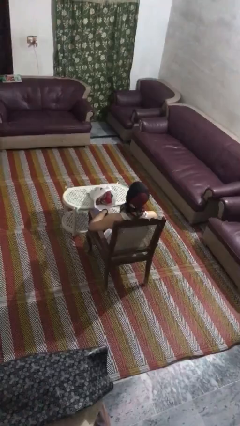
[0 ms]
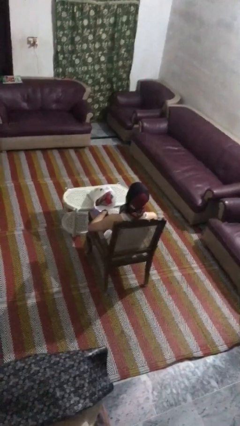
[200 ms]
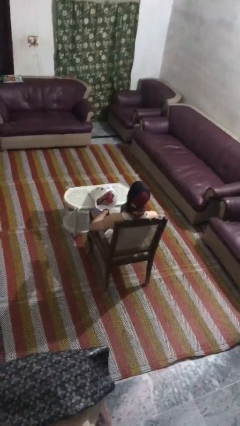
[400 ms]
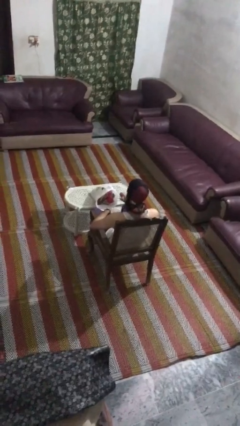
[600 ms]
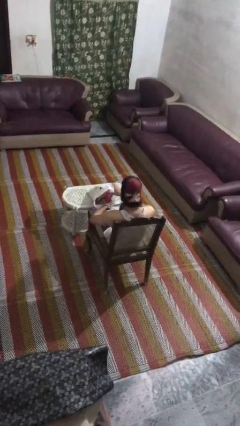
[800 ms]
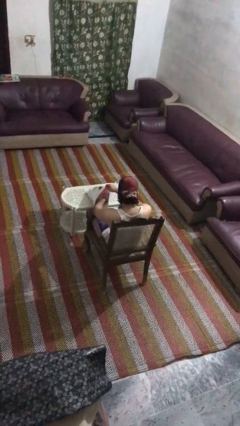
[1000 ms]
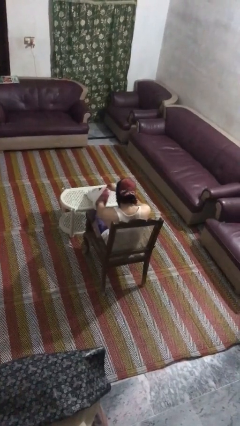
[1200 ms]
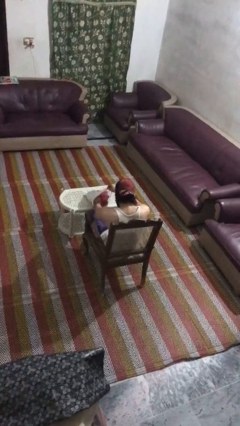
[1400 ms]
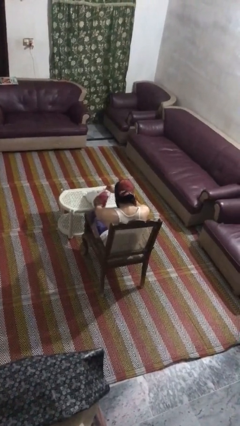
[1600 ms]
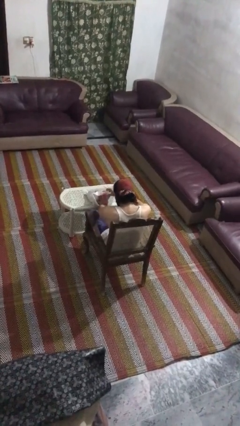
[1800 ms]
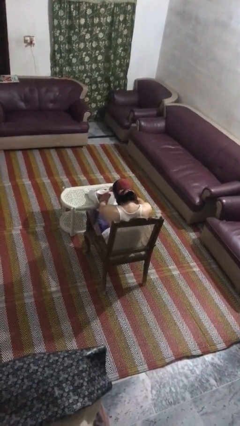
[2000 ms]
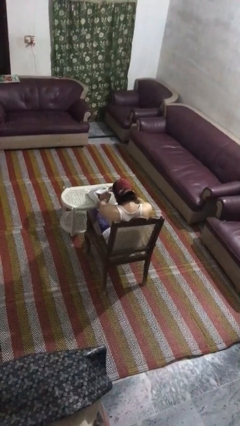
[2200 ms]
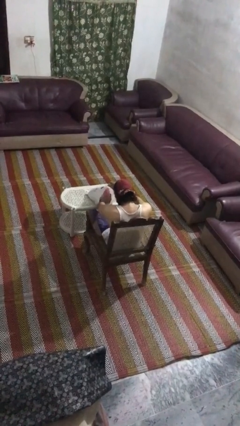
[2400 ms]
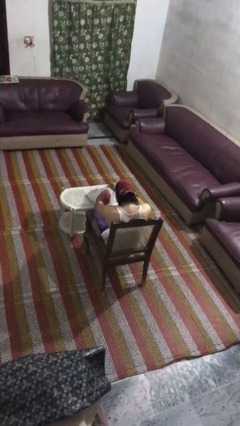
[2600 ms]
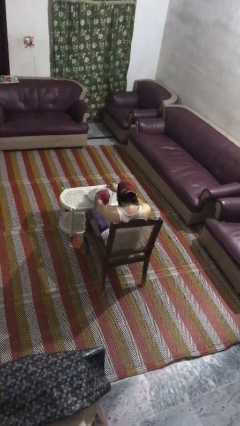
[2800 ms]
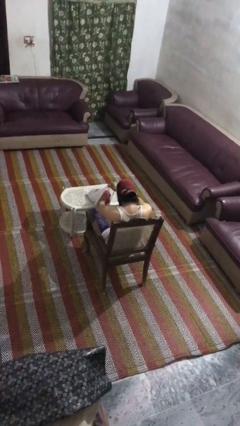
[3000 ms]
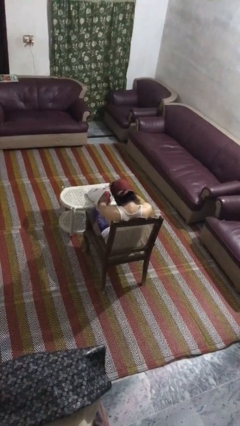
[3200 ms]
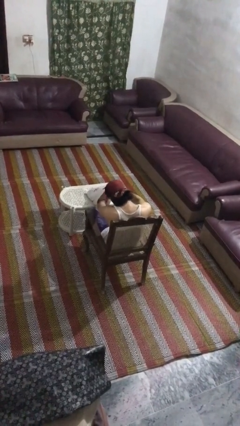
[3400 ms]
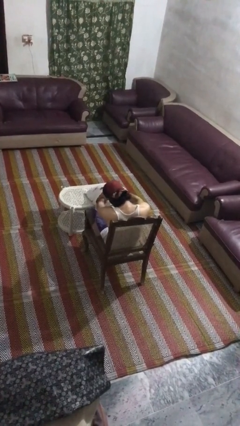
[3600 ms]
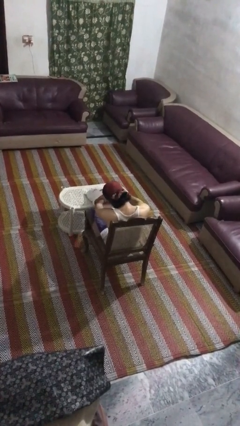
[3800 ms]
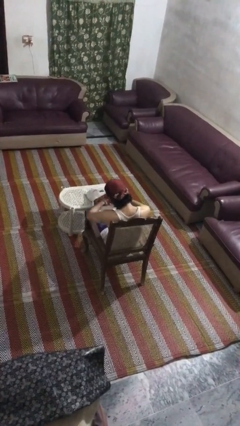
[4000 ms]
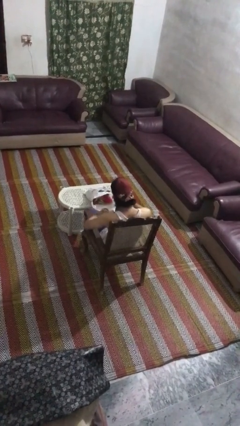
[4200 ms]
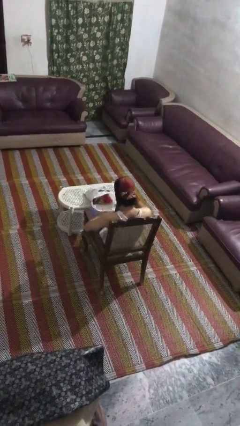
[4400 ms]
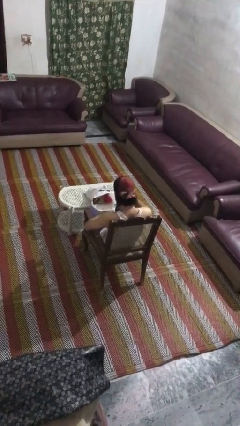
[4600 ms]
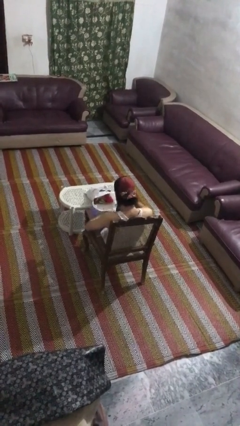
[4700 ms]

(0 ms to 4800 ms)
person searches in bag

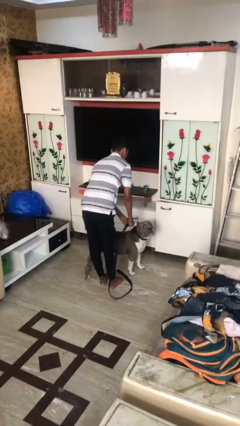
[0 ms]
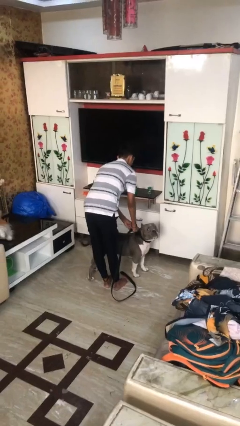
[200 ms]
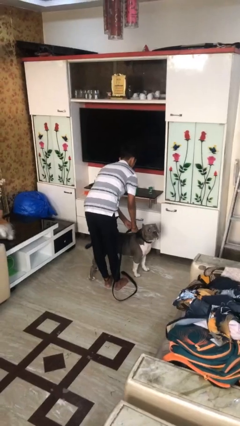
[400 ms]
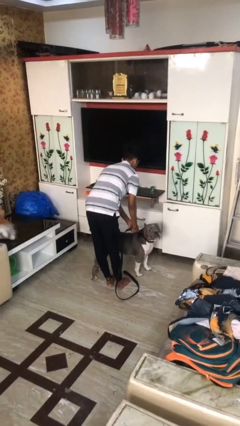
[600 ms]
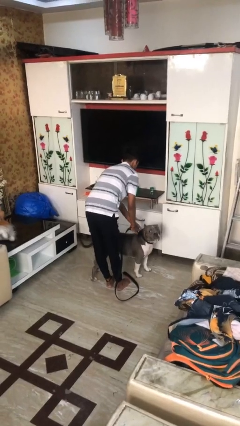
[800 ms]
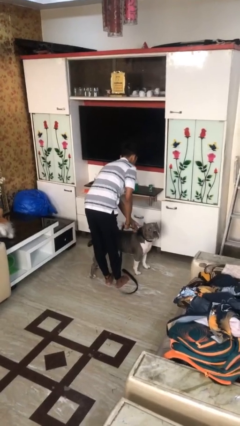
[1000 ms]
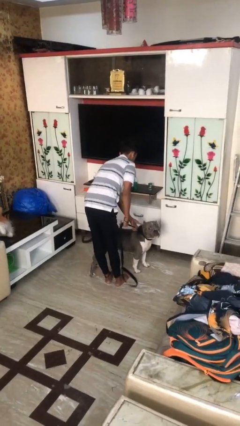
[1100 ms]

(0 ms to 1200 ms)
person attaches leash to dog

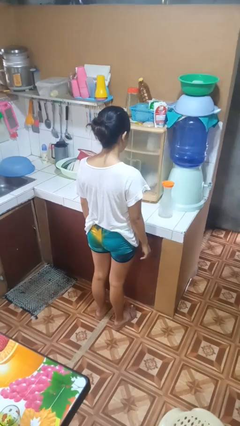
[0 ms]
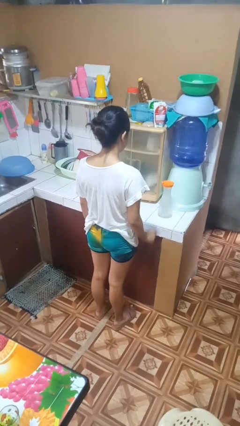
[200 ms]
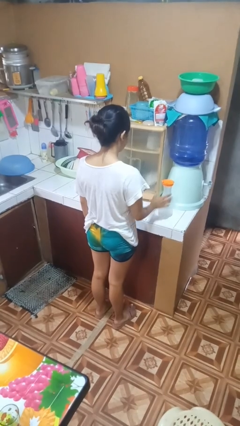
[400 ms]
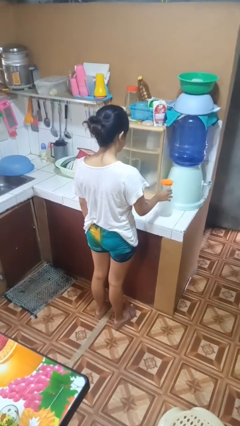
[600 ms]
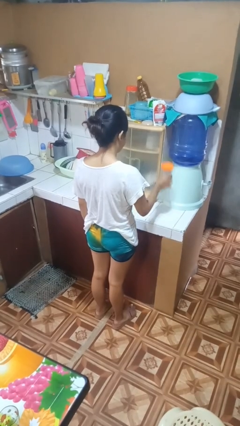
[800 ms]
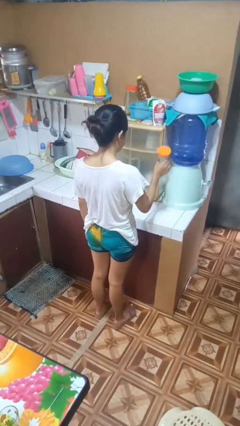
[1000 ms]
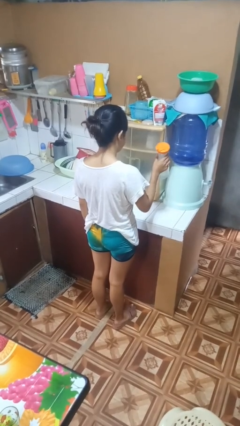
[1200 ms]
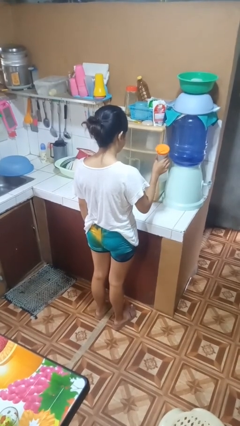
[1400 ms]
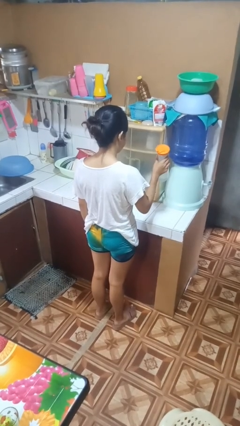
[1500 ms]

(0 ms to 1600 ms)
person picks up object from countertop

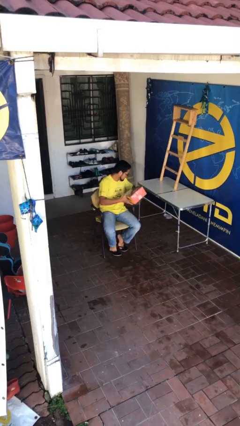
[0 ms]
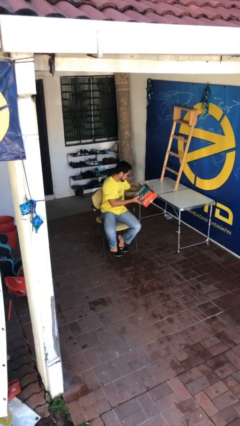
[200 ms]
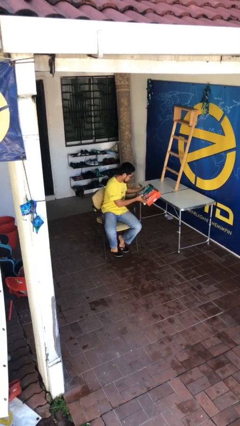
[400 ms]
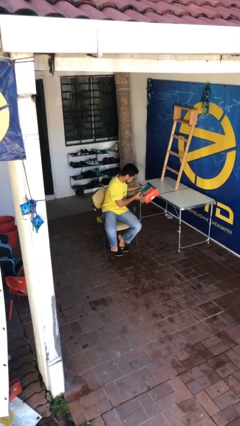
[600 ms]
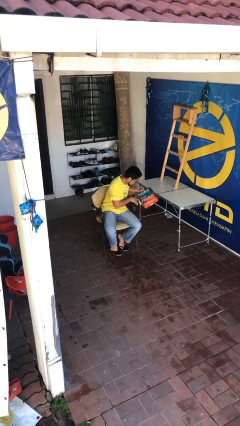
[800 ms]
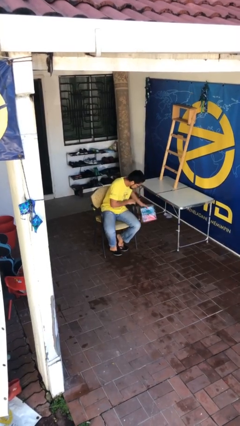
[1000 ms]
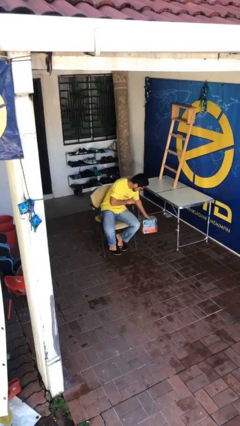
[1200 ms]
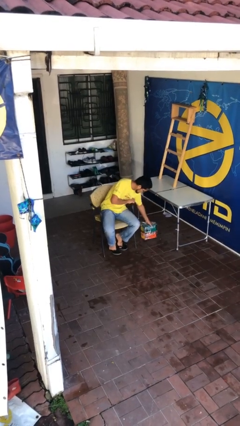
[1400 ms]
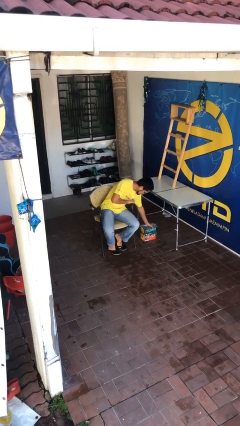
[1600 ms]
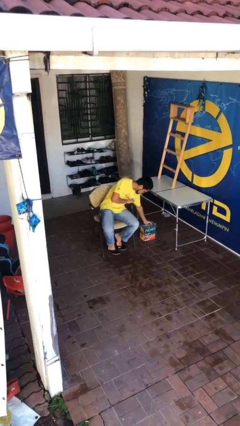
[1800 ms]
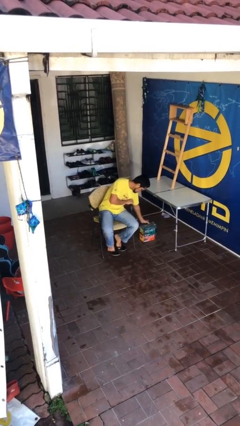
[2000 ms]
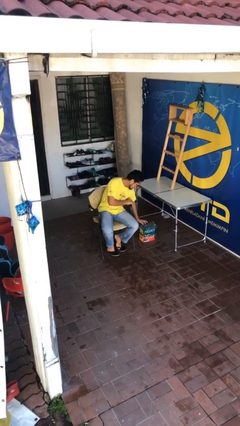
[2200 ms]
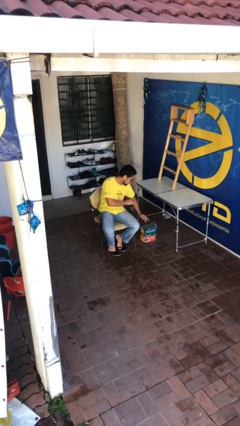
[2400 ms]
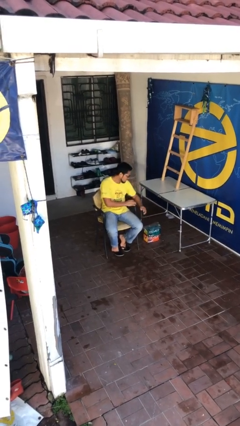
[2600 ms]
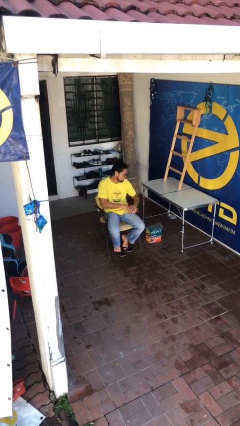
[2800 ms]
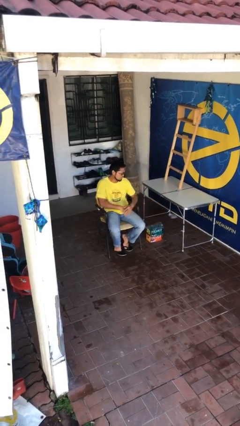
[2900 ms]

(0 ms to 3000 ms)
person puts down object on floor

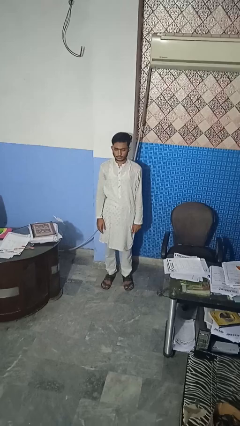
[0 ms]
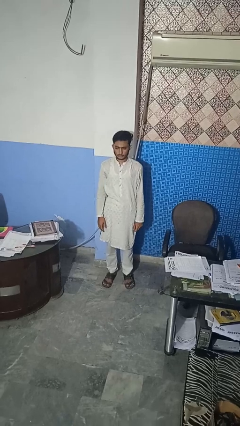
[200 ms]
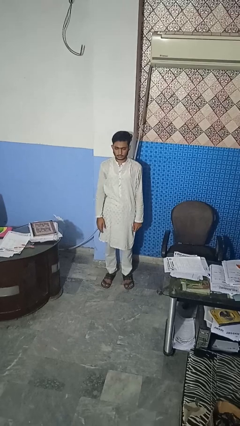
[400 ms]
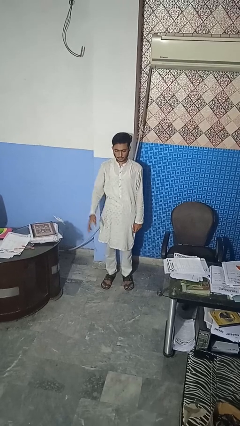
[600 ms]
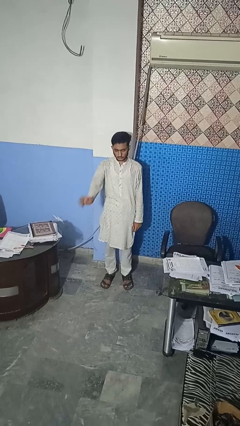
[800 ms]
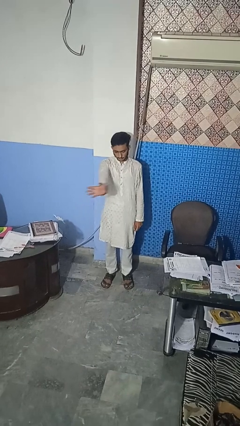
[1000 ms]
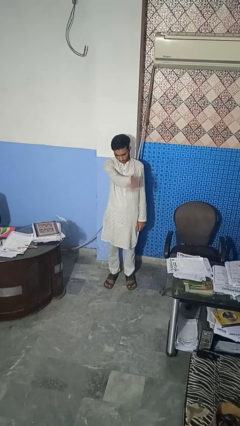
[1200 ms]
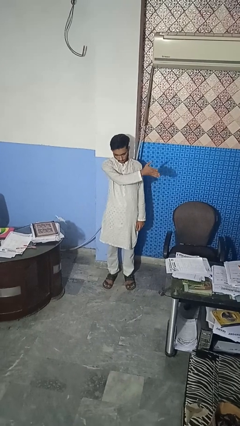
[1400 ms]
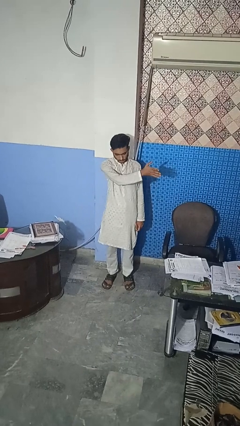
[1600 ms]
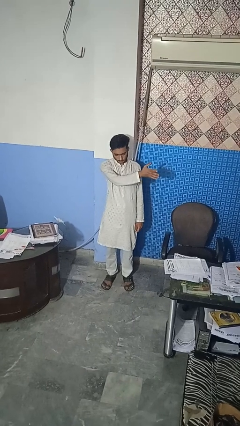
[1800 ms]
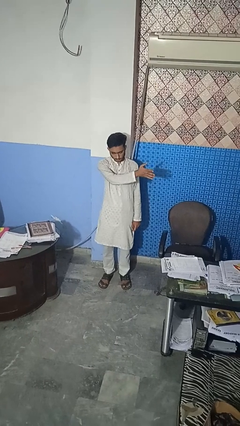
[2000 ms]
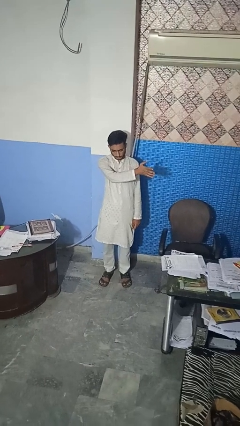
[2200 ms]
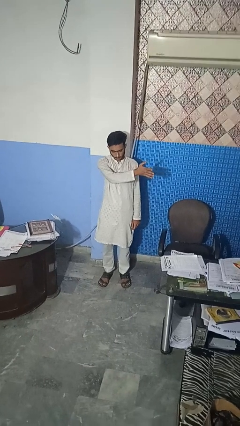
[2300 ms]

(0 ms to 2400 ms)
person gestures swipe left

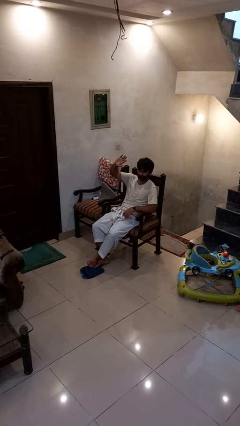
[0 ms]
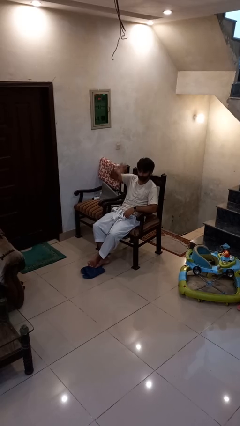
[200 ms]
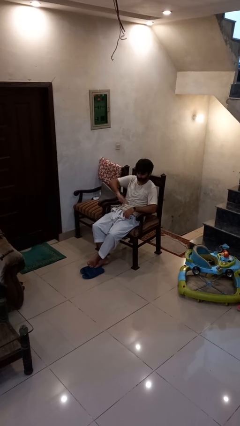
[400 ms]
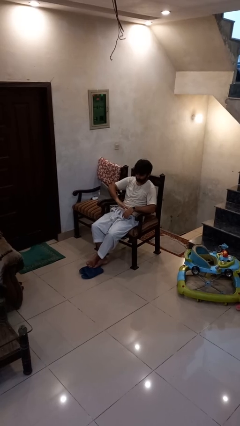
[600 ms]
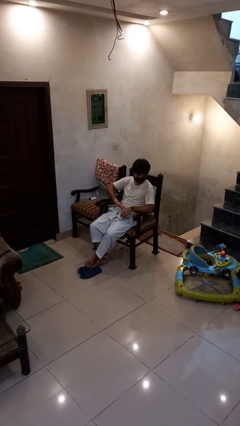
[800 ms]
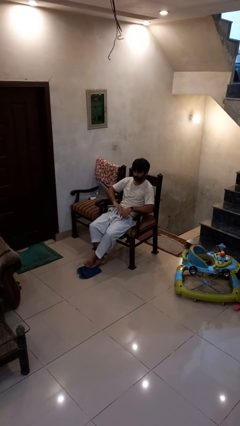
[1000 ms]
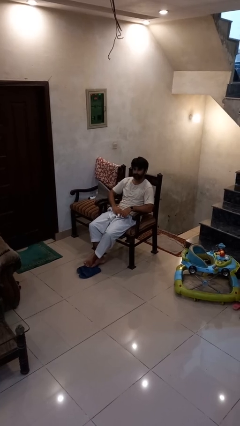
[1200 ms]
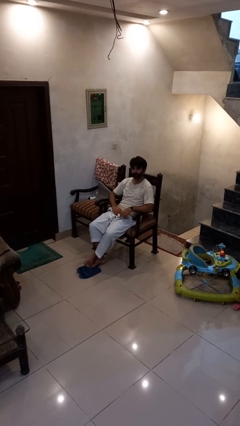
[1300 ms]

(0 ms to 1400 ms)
person gestures swipe down

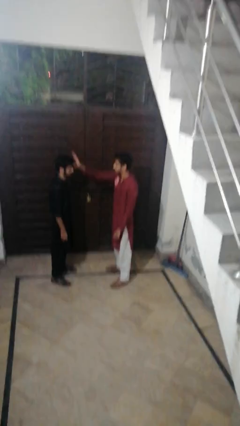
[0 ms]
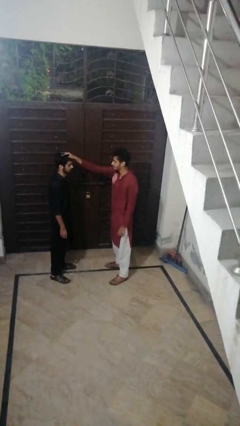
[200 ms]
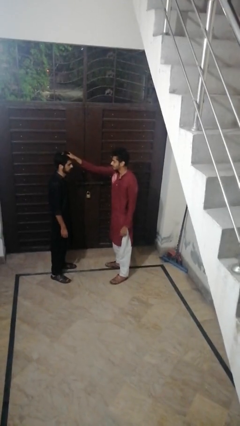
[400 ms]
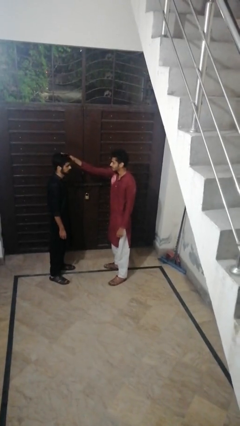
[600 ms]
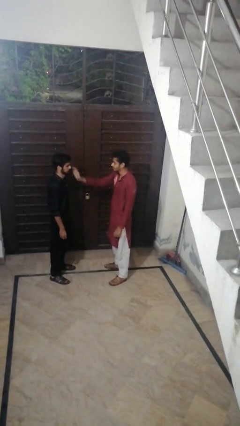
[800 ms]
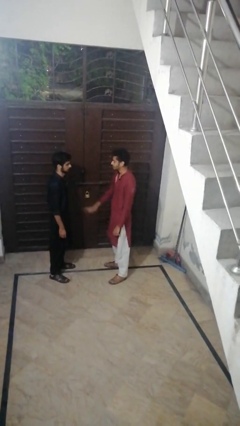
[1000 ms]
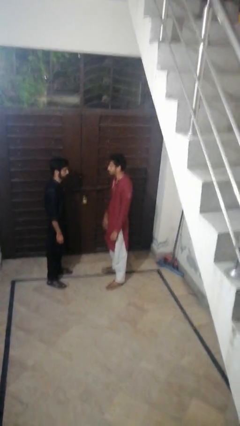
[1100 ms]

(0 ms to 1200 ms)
person grabs person by hair

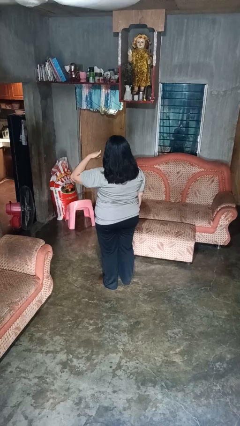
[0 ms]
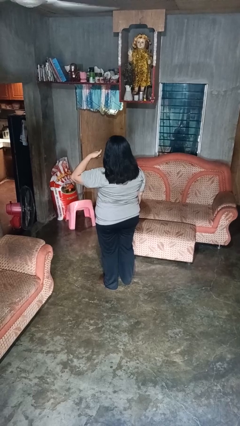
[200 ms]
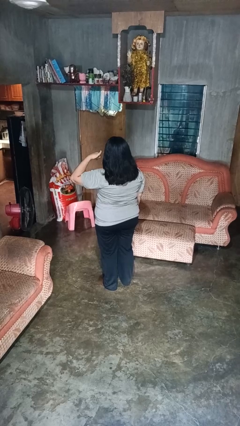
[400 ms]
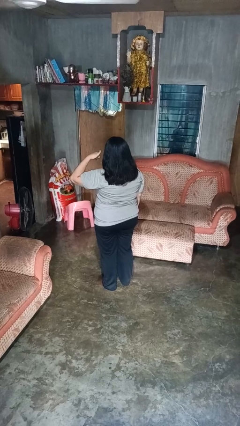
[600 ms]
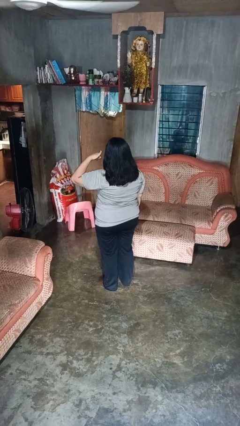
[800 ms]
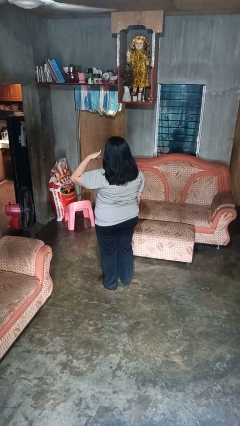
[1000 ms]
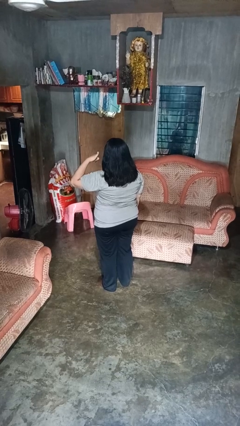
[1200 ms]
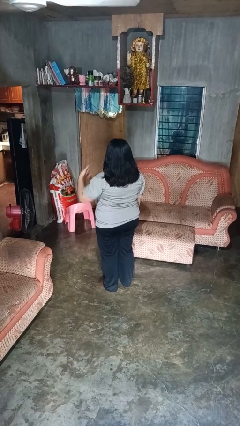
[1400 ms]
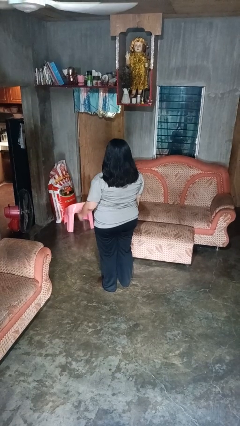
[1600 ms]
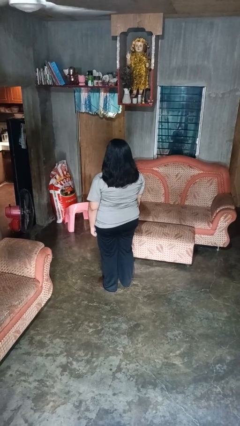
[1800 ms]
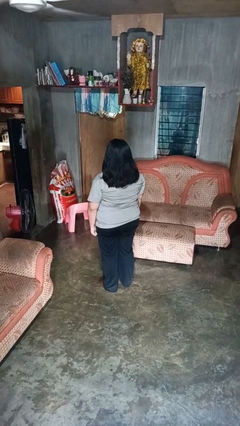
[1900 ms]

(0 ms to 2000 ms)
person gestures call me
